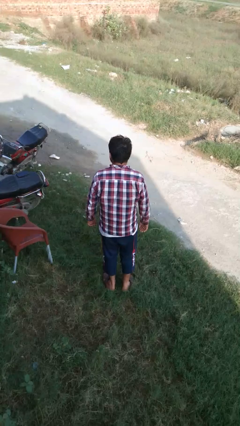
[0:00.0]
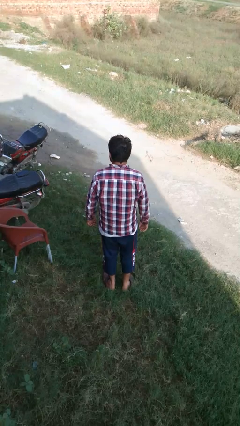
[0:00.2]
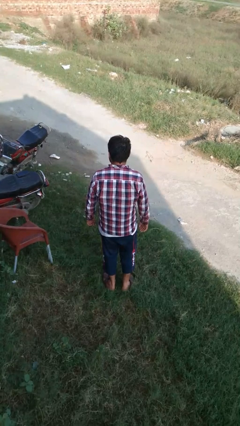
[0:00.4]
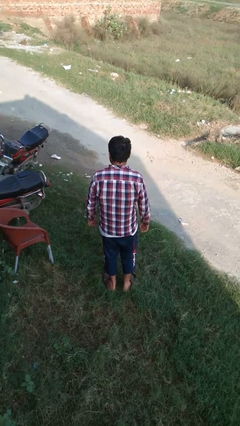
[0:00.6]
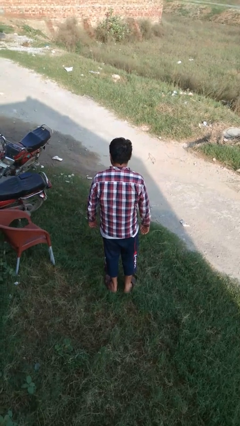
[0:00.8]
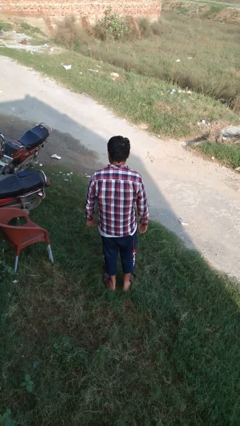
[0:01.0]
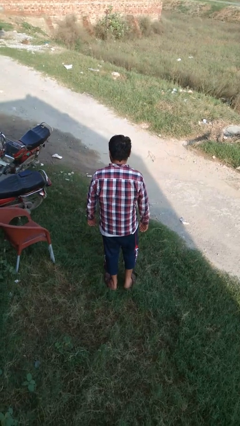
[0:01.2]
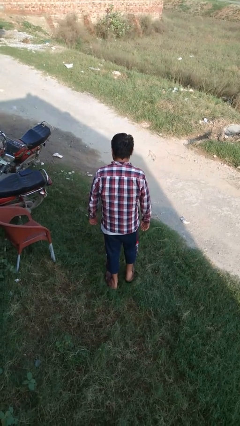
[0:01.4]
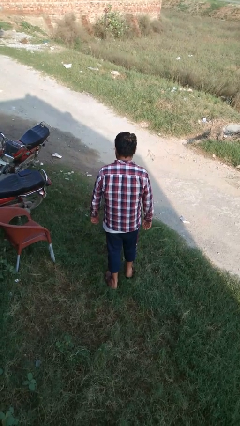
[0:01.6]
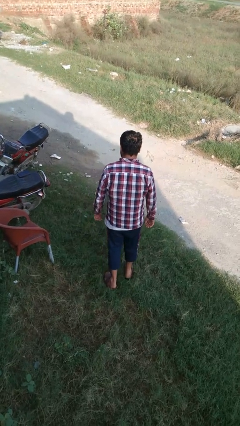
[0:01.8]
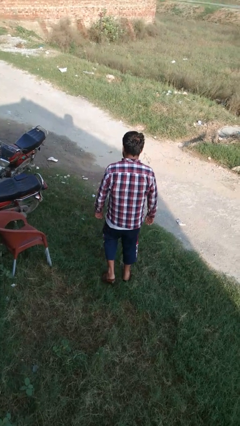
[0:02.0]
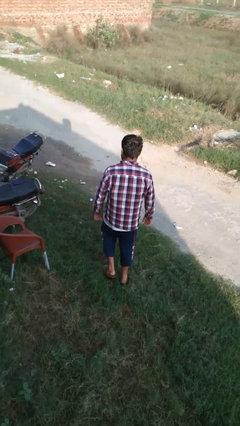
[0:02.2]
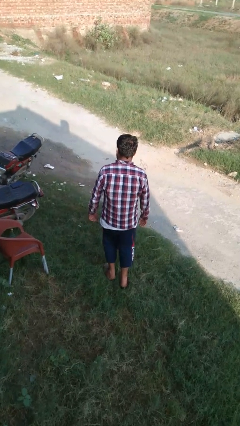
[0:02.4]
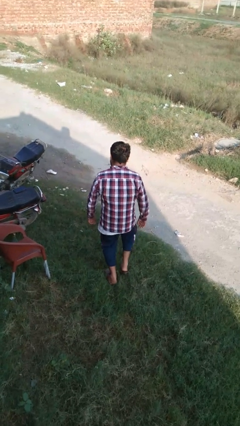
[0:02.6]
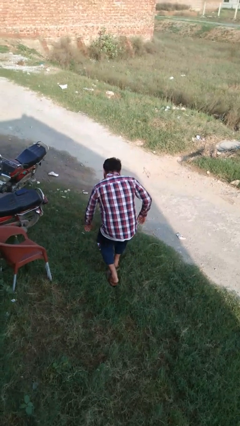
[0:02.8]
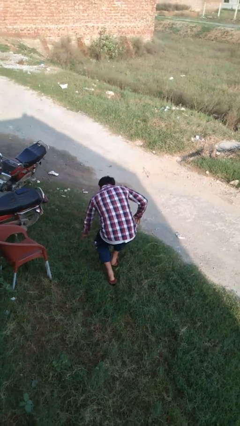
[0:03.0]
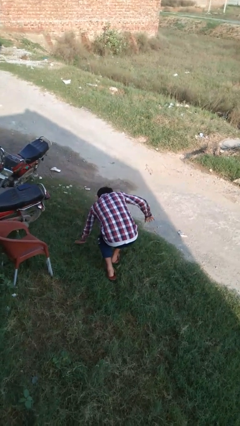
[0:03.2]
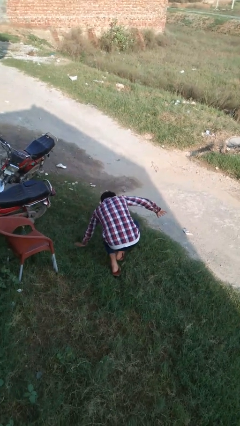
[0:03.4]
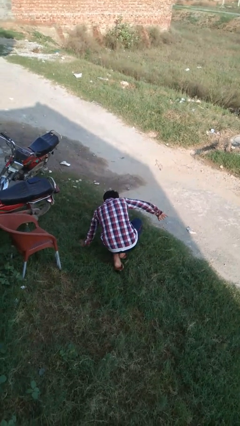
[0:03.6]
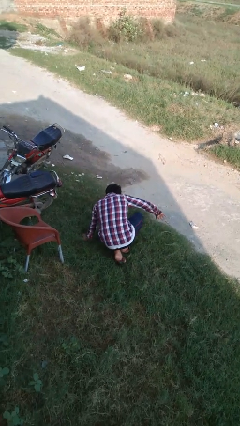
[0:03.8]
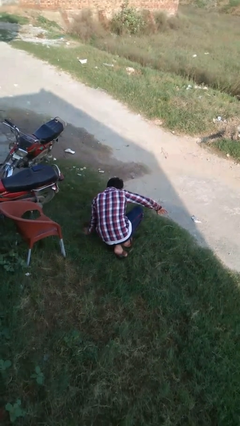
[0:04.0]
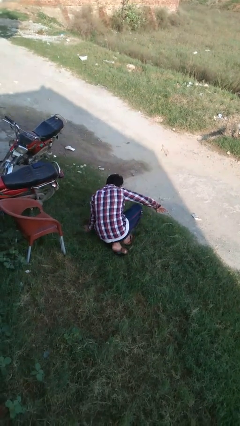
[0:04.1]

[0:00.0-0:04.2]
person trips on object on floor

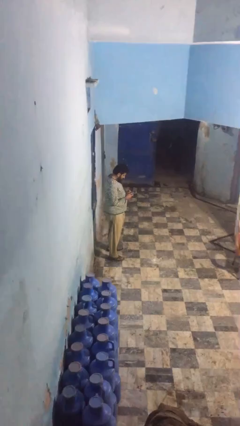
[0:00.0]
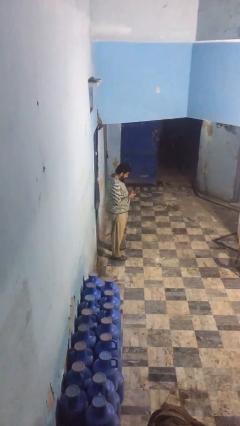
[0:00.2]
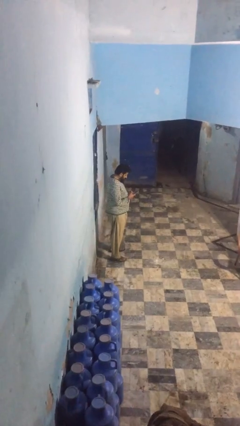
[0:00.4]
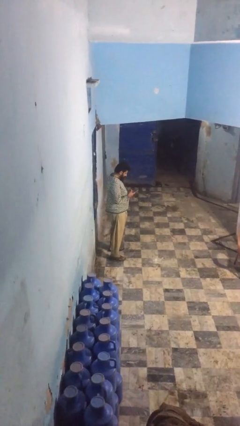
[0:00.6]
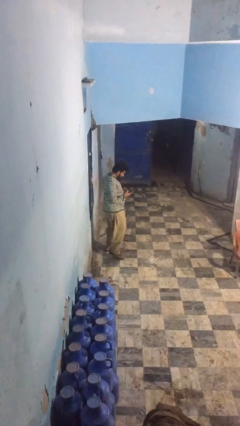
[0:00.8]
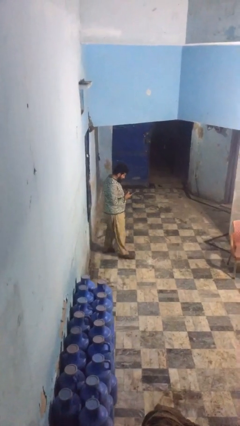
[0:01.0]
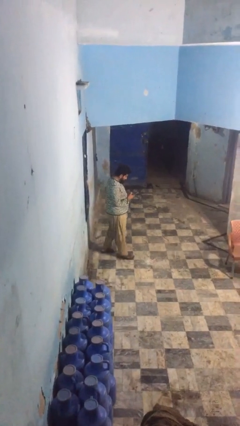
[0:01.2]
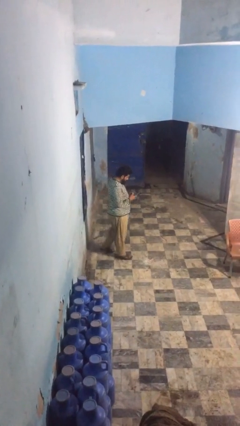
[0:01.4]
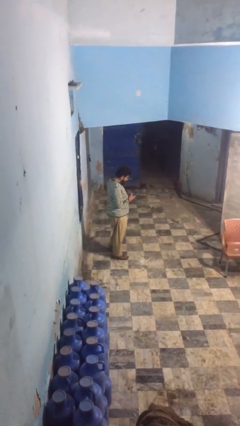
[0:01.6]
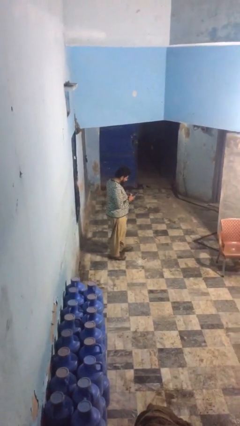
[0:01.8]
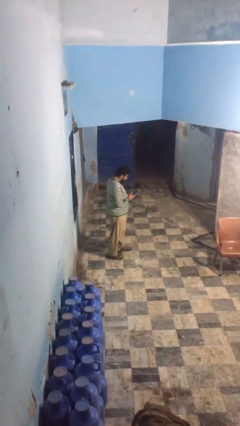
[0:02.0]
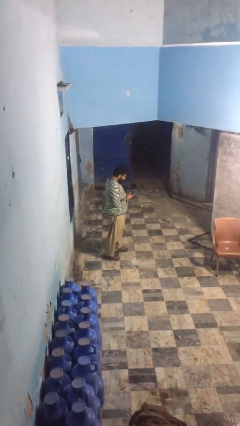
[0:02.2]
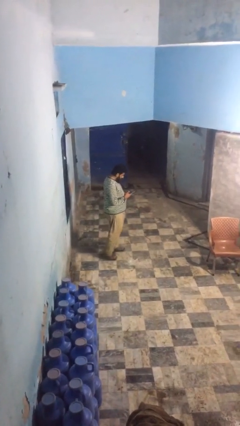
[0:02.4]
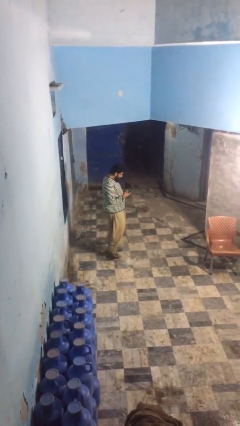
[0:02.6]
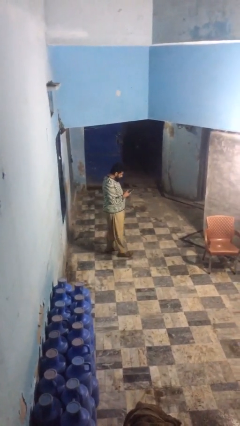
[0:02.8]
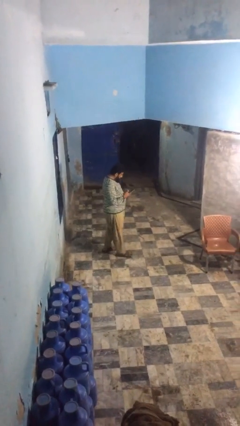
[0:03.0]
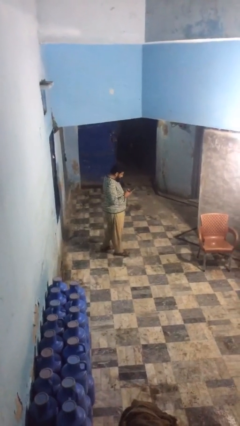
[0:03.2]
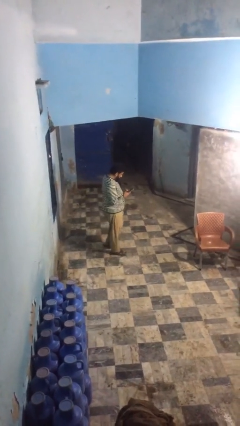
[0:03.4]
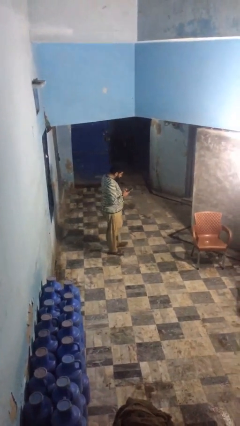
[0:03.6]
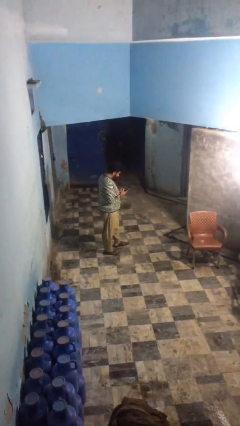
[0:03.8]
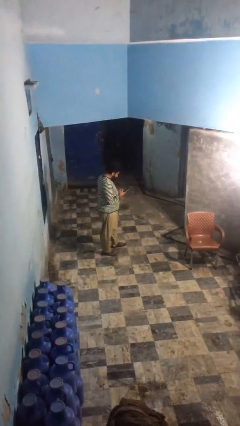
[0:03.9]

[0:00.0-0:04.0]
person texts on phone

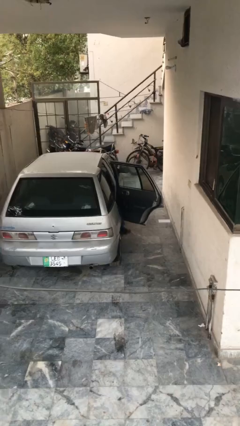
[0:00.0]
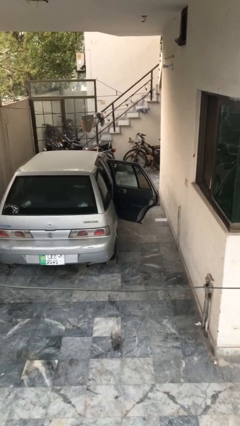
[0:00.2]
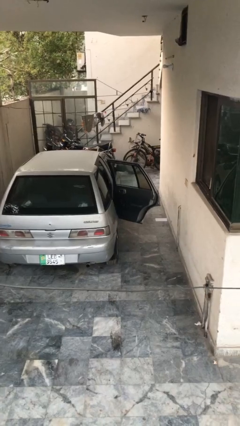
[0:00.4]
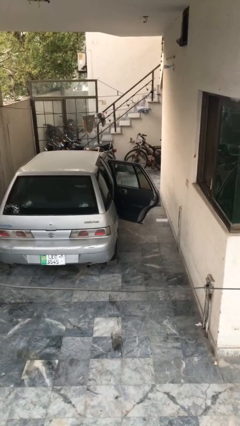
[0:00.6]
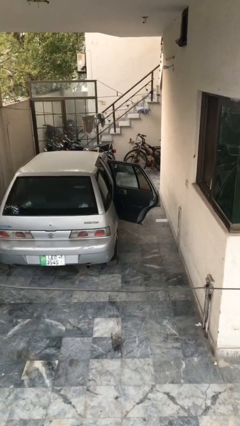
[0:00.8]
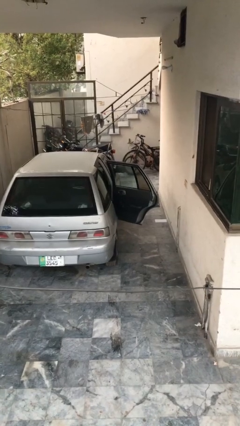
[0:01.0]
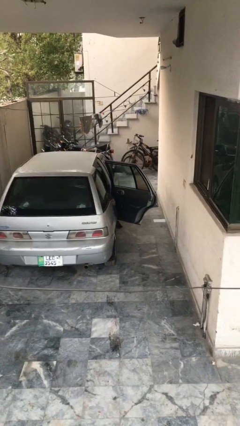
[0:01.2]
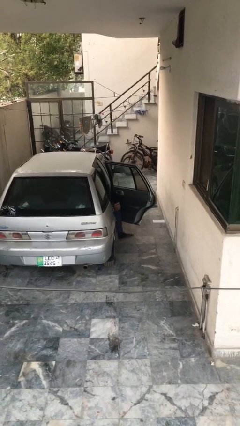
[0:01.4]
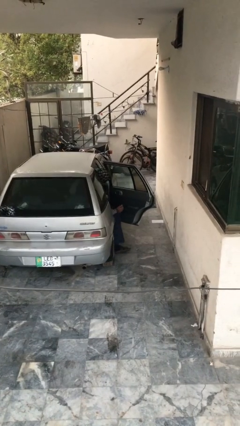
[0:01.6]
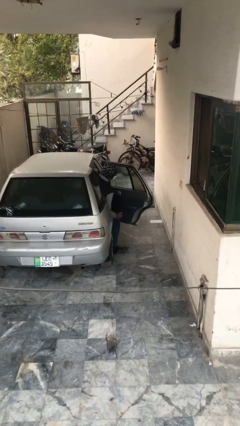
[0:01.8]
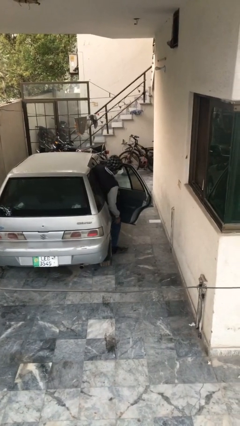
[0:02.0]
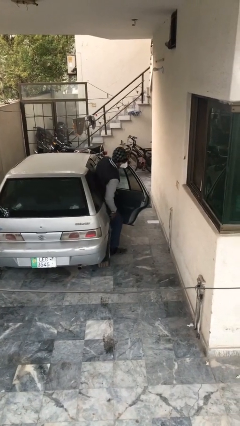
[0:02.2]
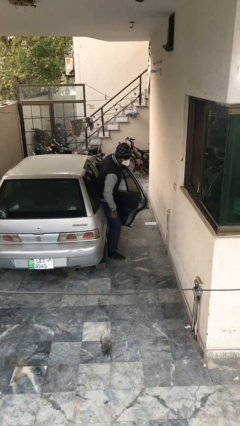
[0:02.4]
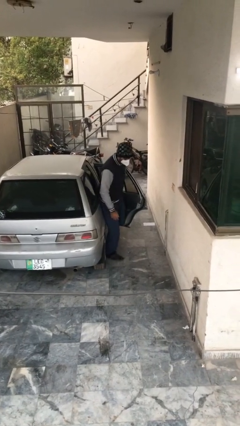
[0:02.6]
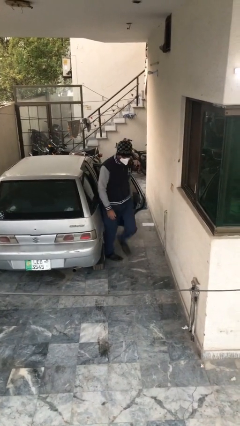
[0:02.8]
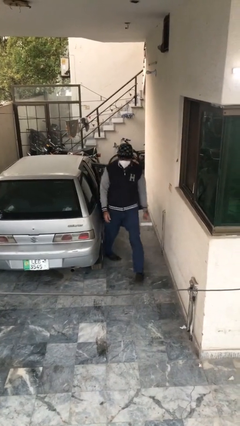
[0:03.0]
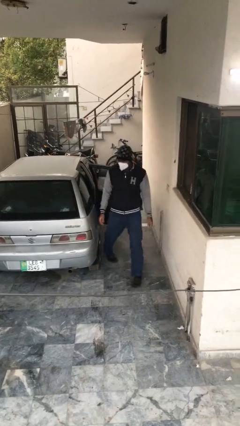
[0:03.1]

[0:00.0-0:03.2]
person exits car

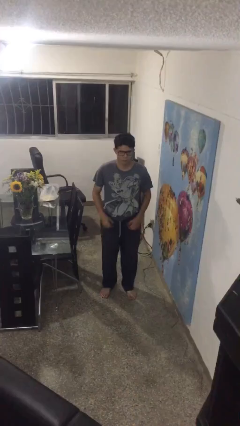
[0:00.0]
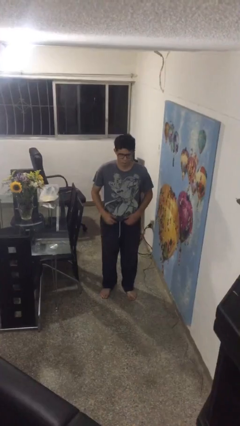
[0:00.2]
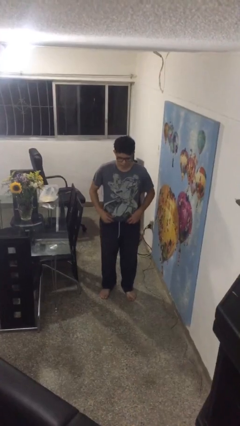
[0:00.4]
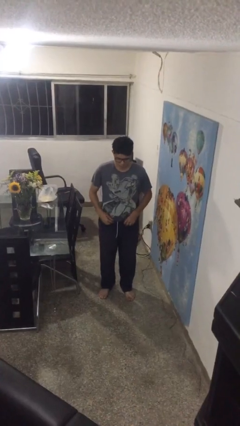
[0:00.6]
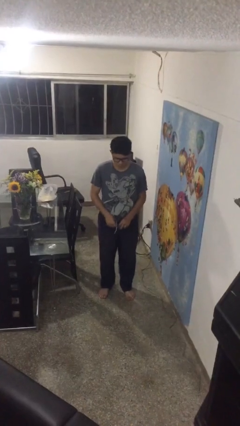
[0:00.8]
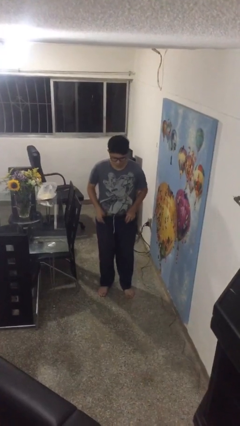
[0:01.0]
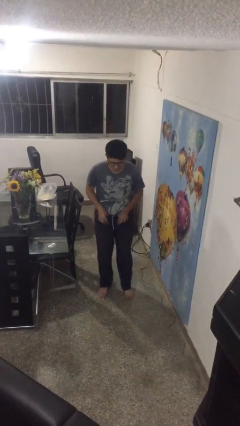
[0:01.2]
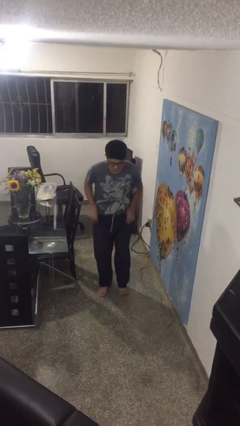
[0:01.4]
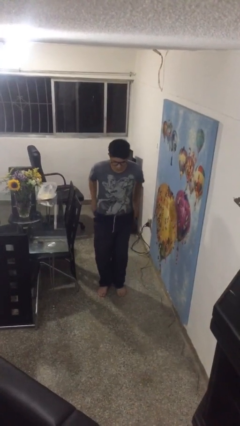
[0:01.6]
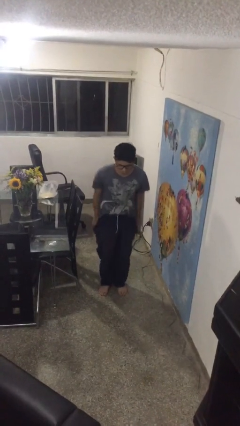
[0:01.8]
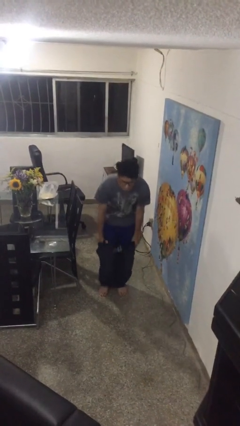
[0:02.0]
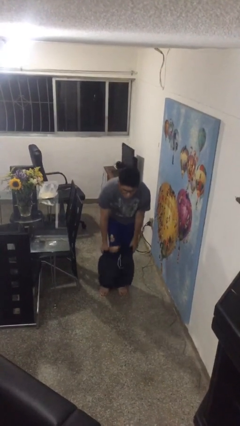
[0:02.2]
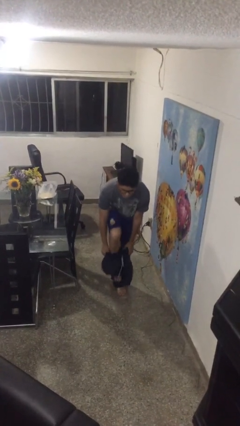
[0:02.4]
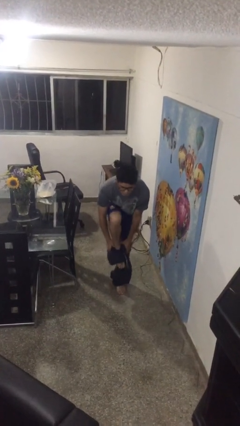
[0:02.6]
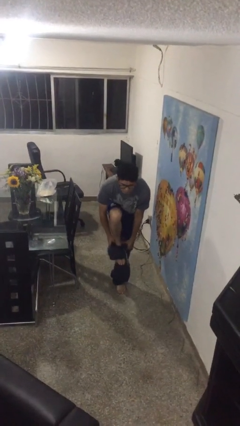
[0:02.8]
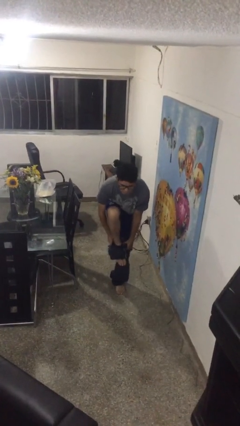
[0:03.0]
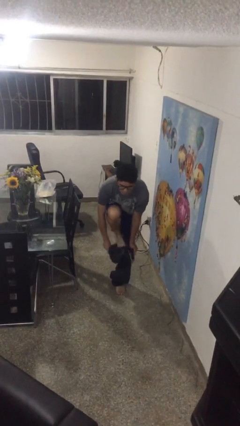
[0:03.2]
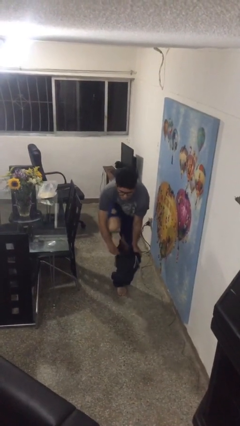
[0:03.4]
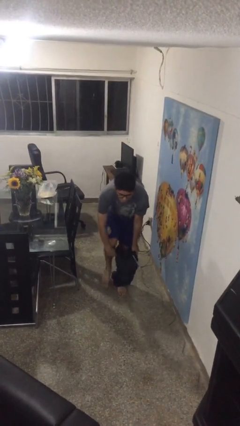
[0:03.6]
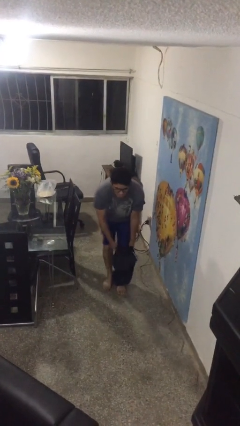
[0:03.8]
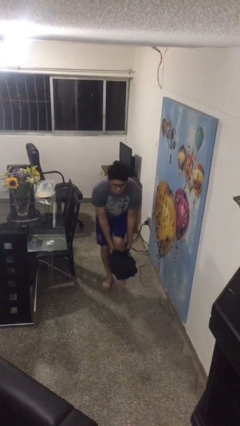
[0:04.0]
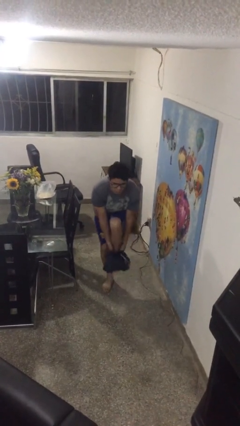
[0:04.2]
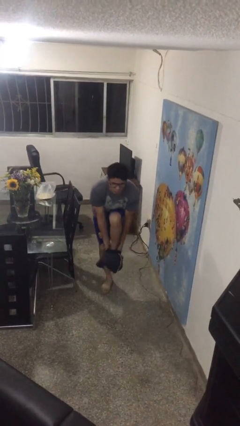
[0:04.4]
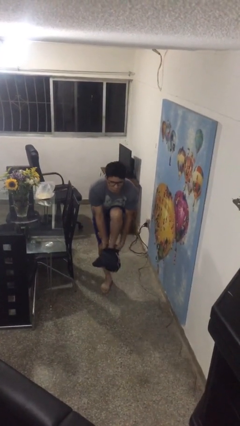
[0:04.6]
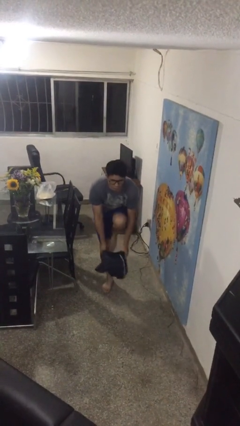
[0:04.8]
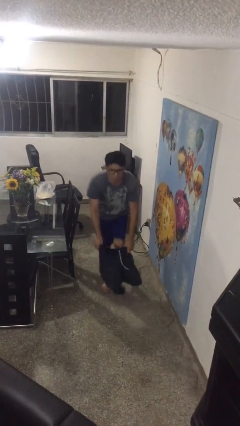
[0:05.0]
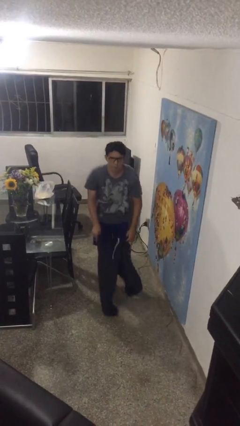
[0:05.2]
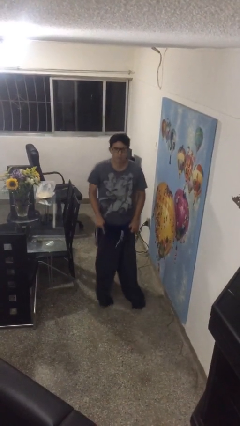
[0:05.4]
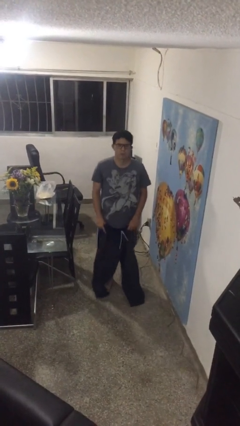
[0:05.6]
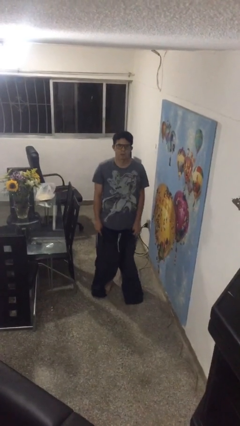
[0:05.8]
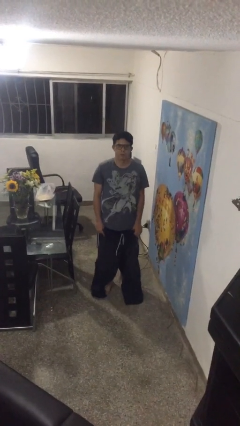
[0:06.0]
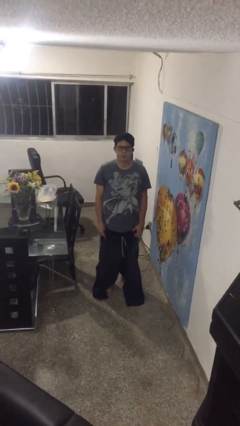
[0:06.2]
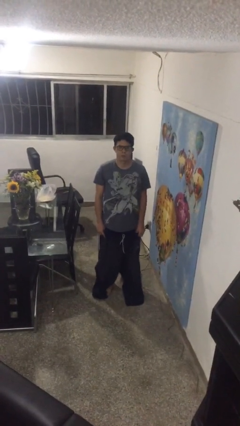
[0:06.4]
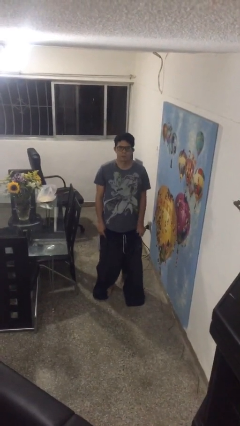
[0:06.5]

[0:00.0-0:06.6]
person takes off pants
